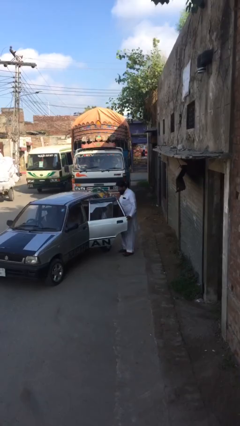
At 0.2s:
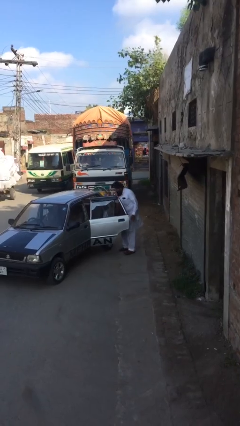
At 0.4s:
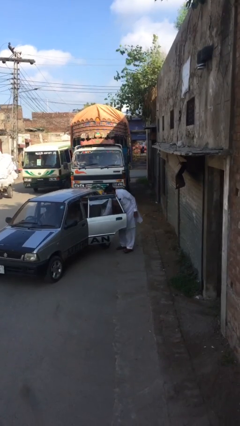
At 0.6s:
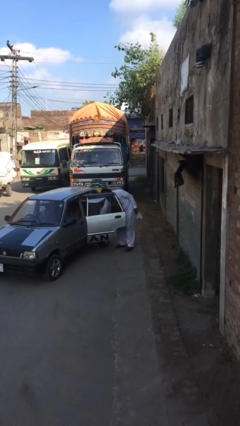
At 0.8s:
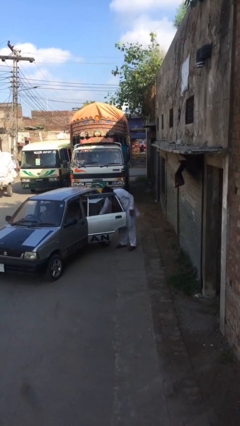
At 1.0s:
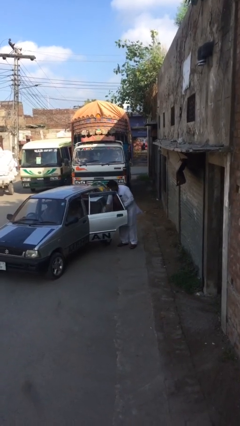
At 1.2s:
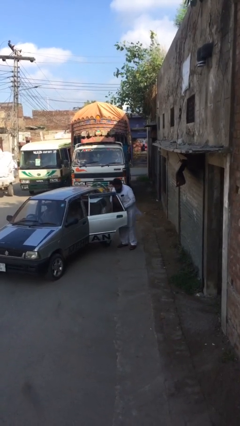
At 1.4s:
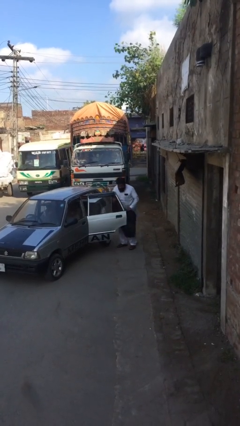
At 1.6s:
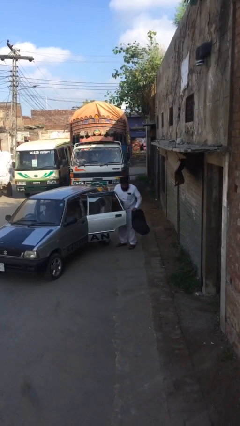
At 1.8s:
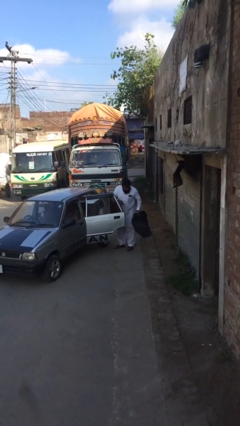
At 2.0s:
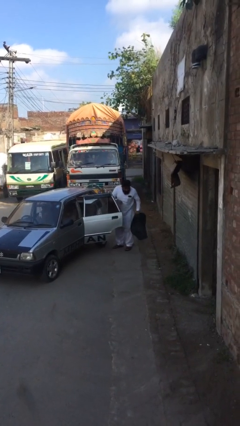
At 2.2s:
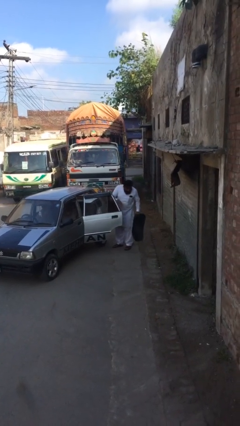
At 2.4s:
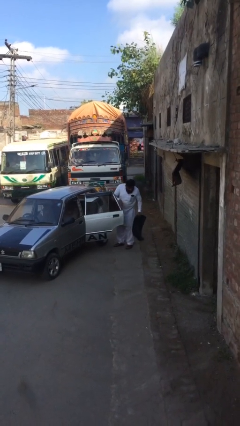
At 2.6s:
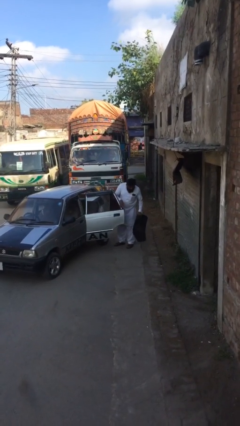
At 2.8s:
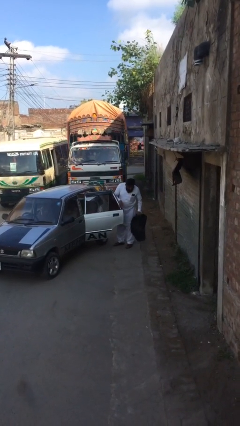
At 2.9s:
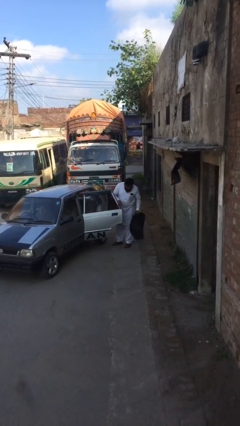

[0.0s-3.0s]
person unloads car

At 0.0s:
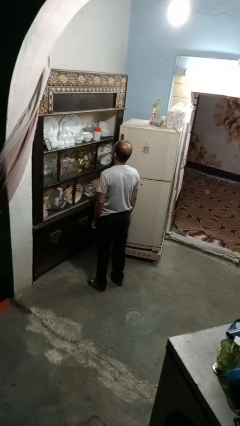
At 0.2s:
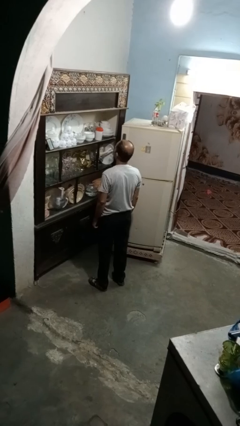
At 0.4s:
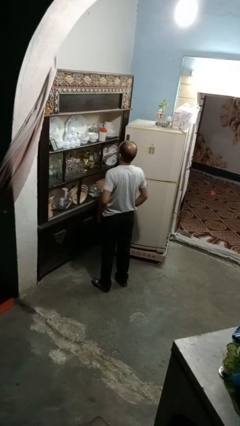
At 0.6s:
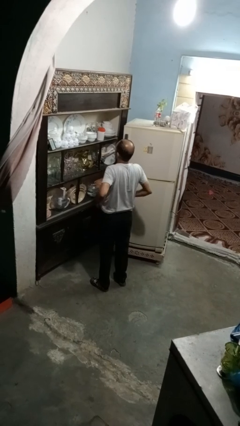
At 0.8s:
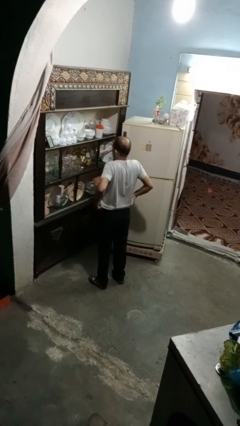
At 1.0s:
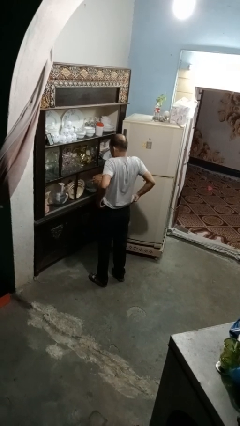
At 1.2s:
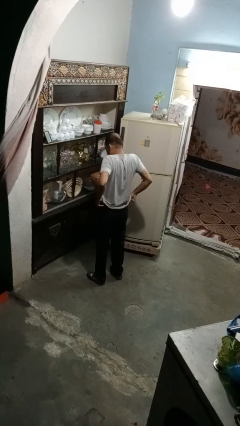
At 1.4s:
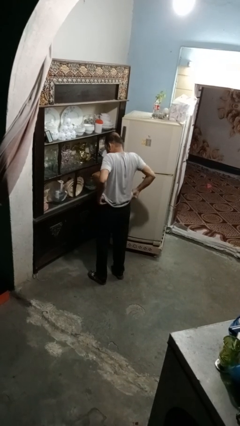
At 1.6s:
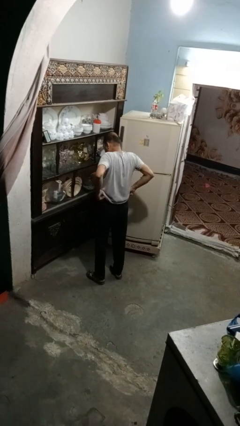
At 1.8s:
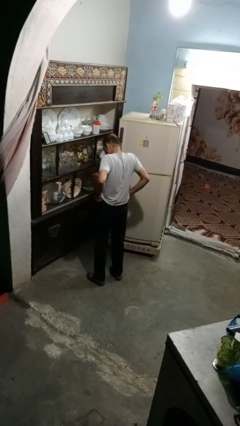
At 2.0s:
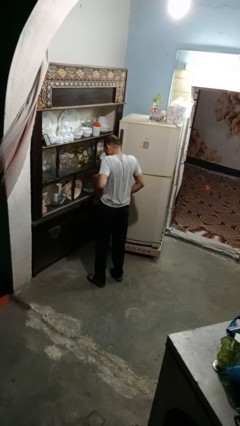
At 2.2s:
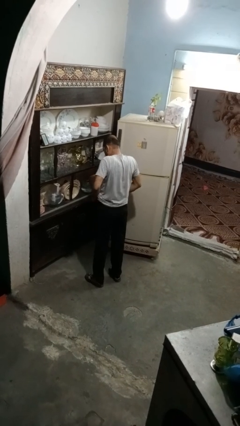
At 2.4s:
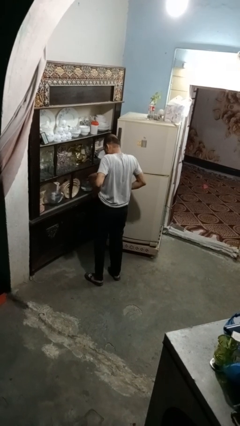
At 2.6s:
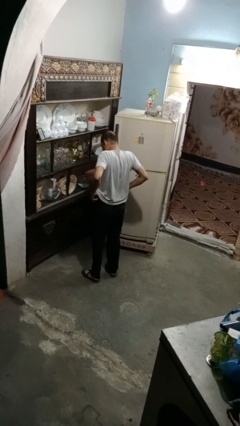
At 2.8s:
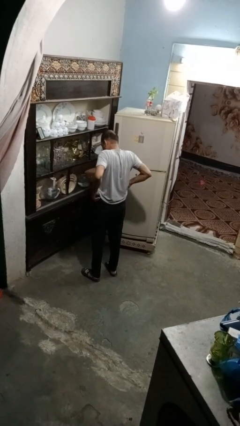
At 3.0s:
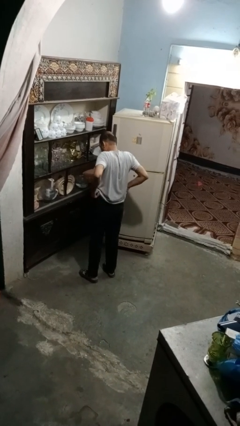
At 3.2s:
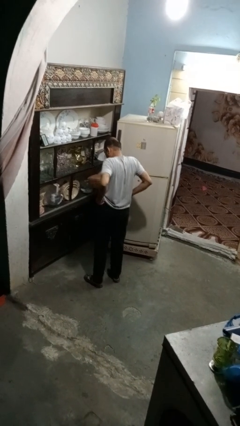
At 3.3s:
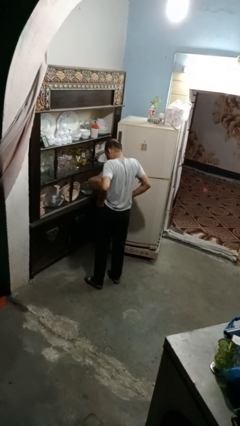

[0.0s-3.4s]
person hikes up pants

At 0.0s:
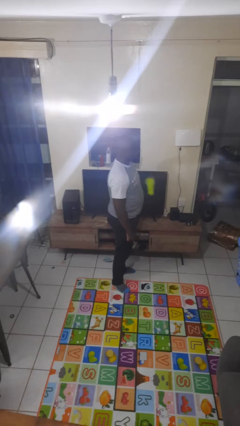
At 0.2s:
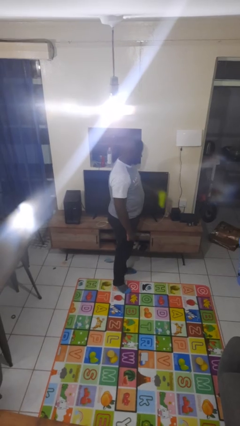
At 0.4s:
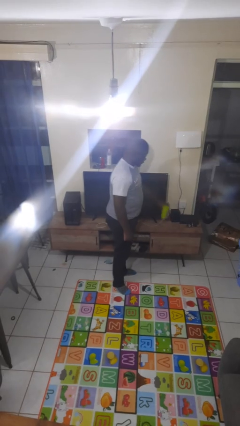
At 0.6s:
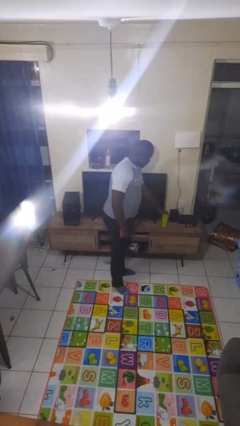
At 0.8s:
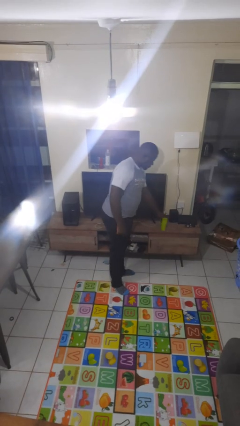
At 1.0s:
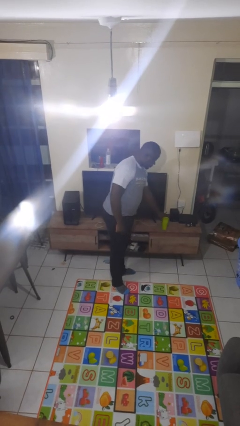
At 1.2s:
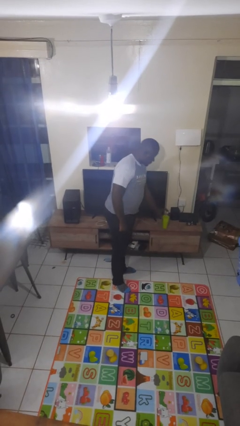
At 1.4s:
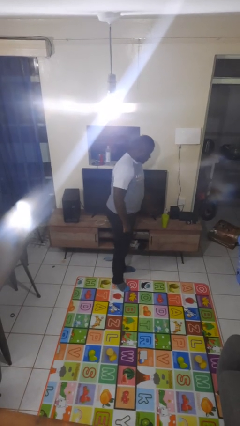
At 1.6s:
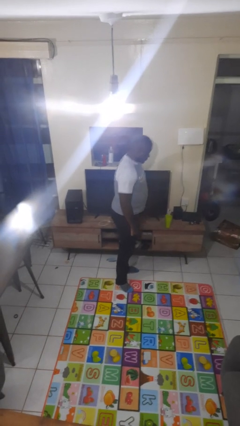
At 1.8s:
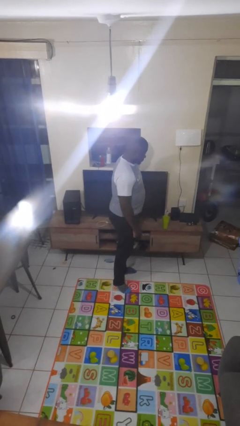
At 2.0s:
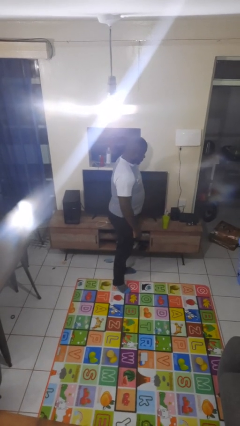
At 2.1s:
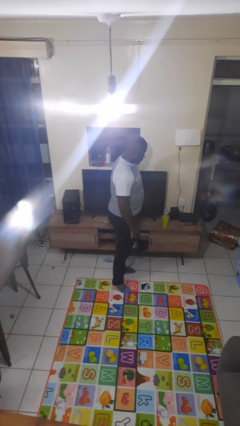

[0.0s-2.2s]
person puts down object on countertop

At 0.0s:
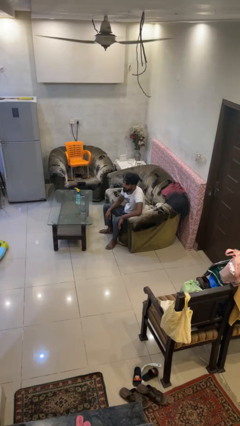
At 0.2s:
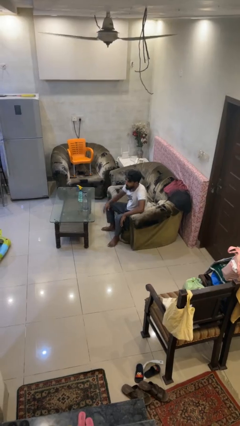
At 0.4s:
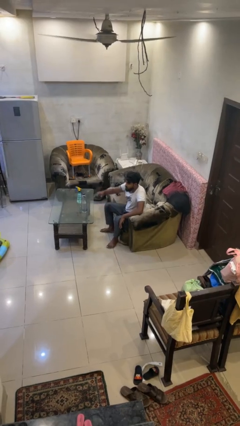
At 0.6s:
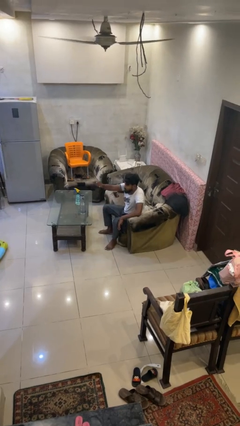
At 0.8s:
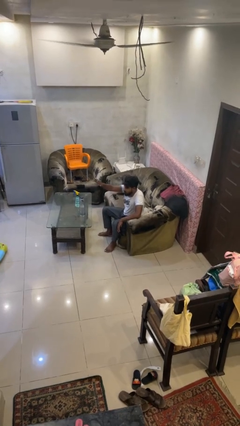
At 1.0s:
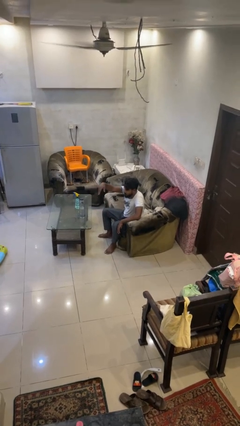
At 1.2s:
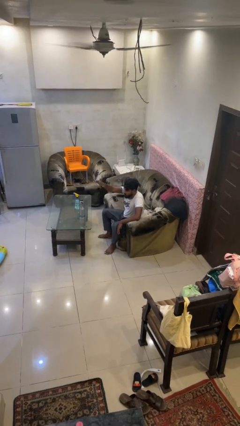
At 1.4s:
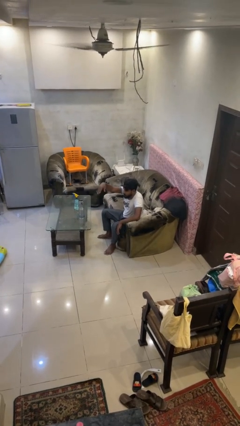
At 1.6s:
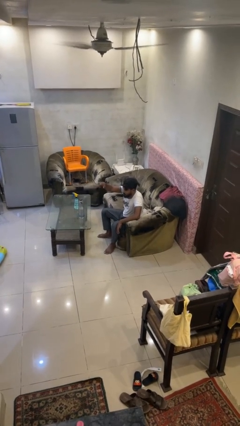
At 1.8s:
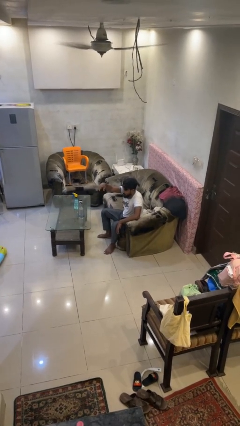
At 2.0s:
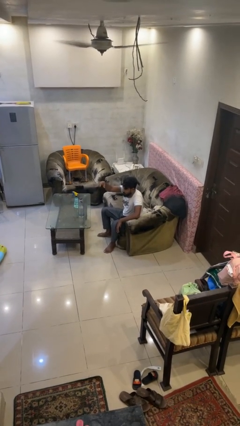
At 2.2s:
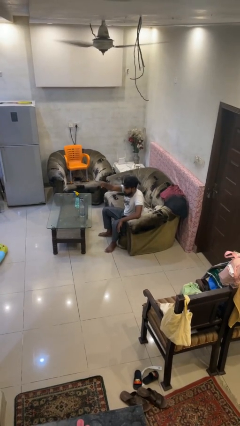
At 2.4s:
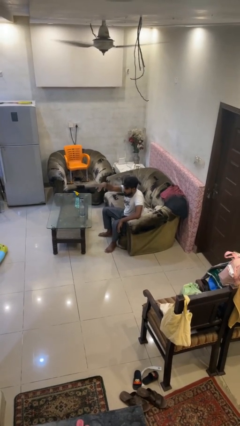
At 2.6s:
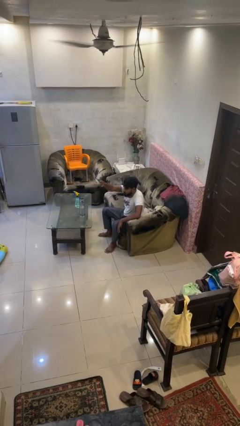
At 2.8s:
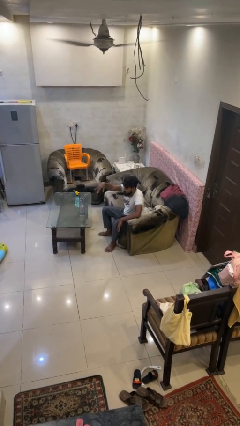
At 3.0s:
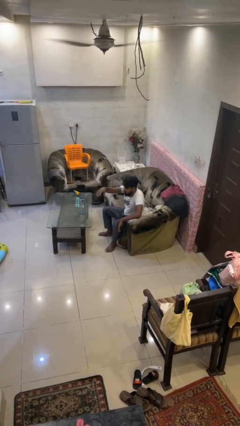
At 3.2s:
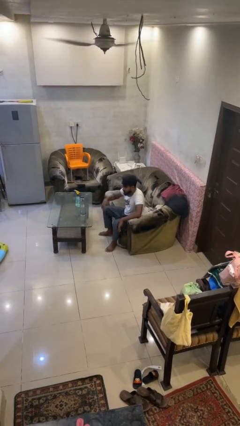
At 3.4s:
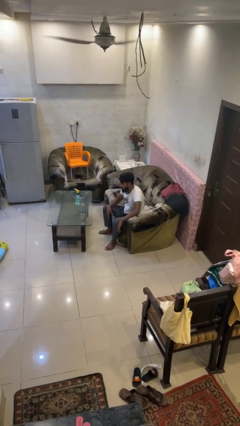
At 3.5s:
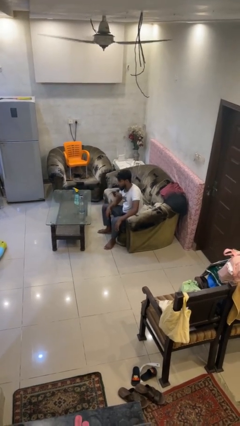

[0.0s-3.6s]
person gestures come here

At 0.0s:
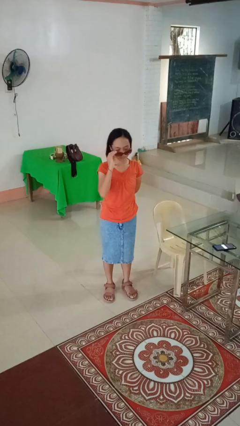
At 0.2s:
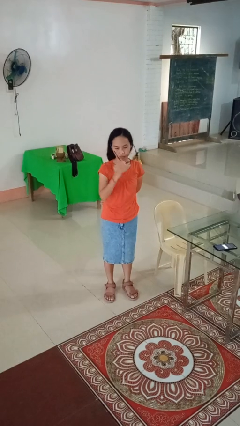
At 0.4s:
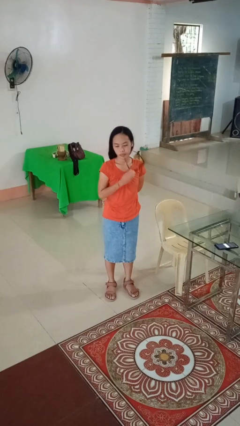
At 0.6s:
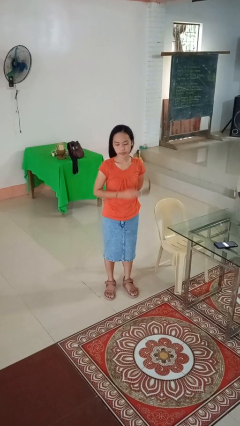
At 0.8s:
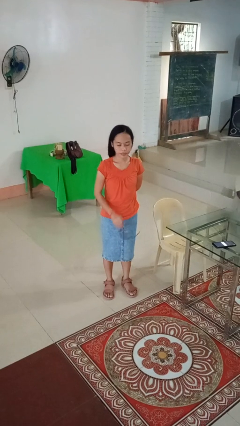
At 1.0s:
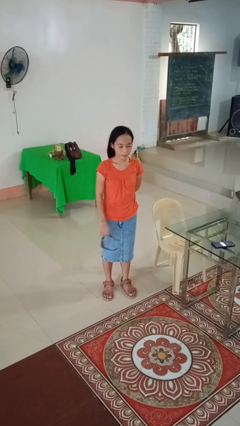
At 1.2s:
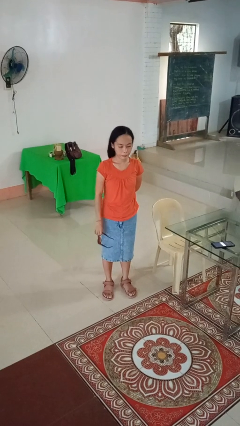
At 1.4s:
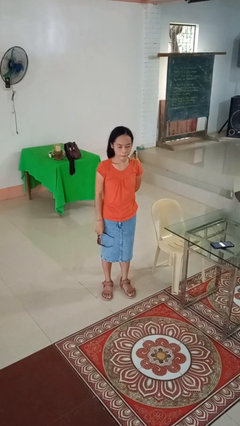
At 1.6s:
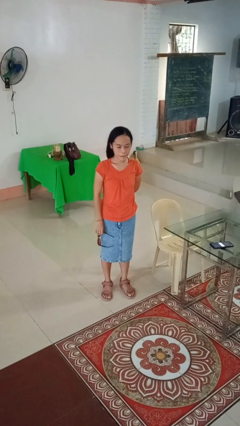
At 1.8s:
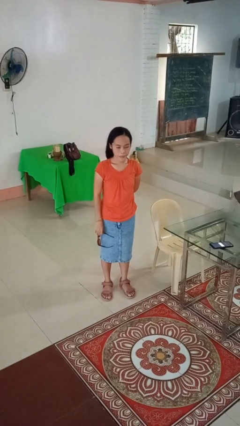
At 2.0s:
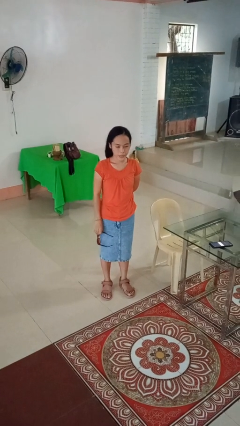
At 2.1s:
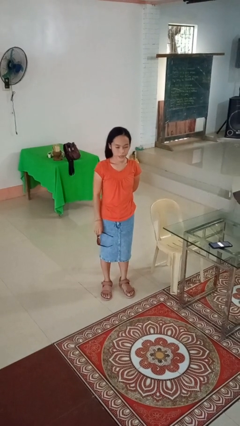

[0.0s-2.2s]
person takes off sunglasses

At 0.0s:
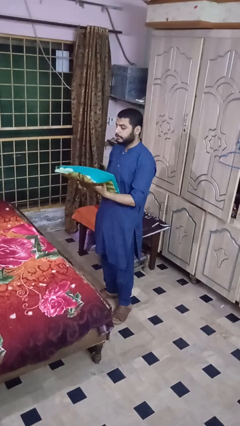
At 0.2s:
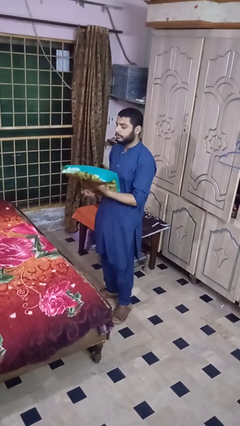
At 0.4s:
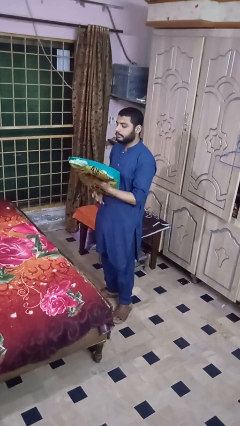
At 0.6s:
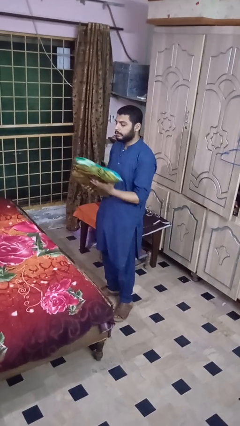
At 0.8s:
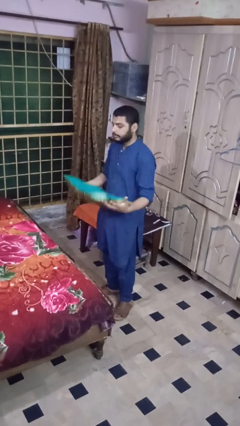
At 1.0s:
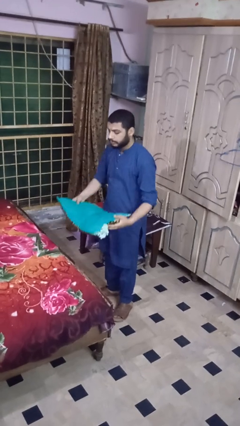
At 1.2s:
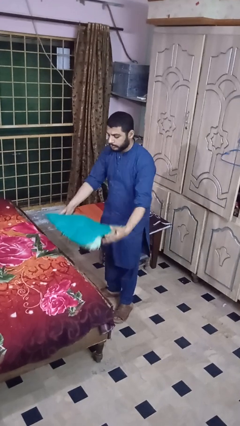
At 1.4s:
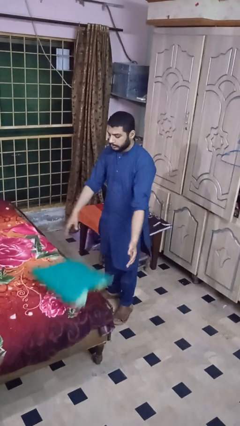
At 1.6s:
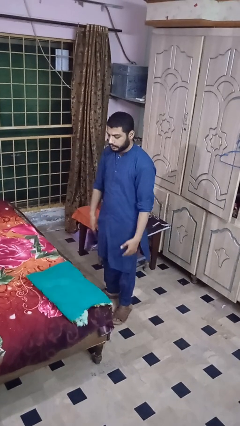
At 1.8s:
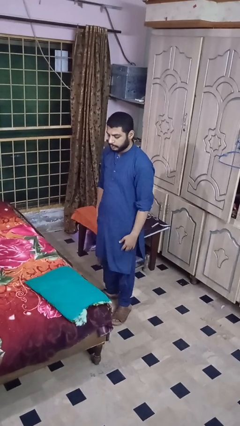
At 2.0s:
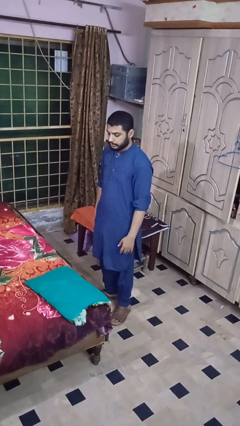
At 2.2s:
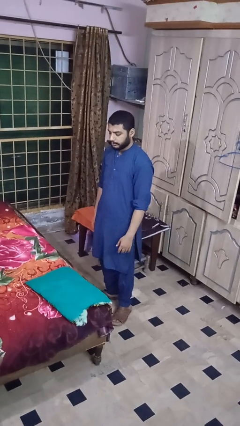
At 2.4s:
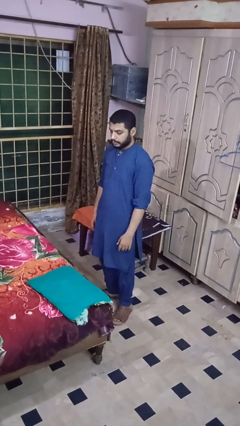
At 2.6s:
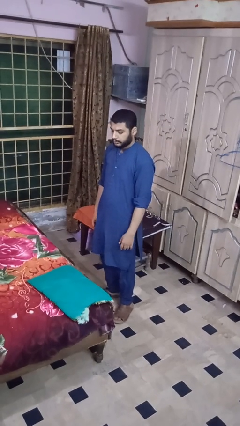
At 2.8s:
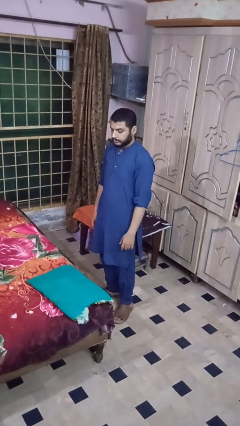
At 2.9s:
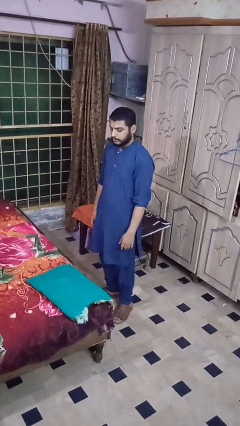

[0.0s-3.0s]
person puts down object on bed

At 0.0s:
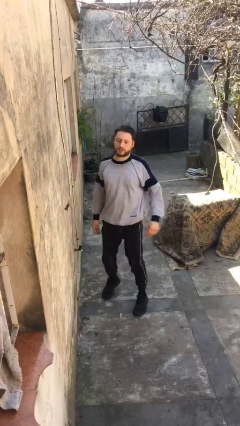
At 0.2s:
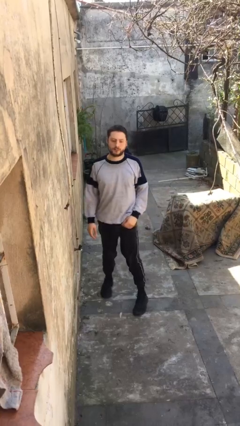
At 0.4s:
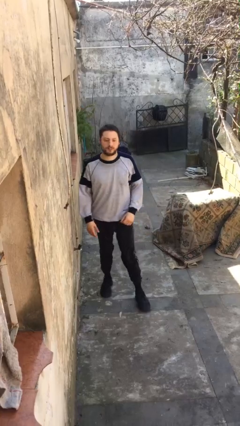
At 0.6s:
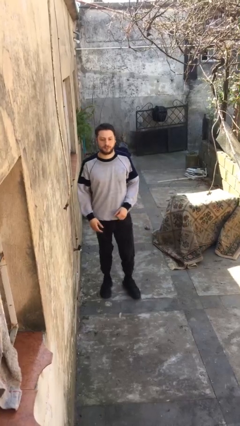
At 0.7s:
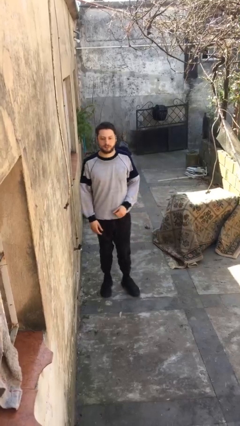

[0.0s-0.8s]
person karate chop
